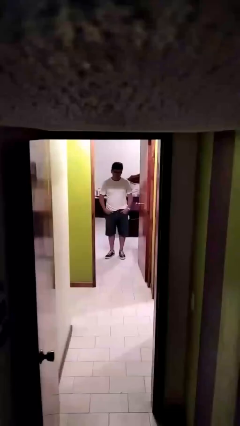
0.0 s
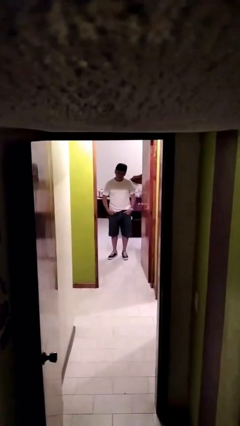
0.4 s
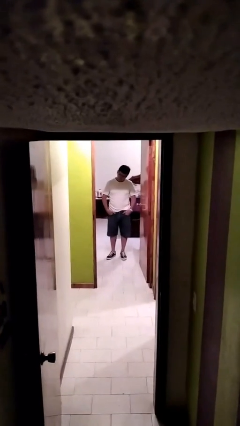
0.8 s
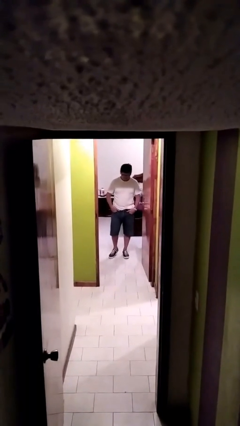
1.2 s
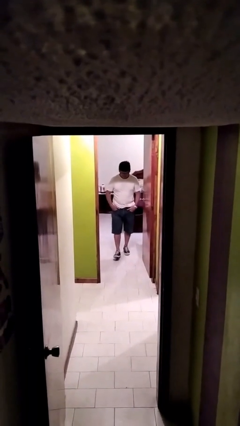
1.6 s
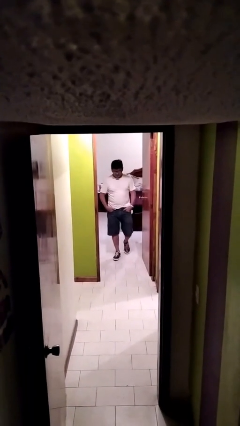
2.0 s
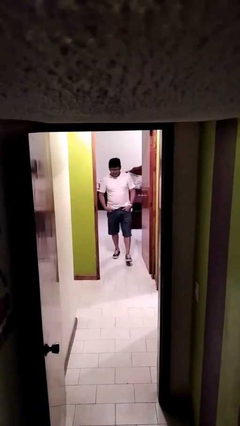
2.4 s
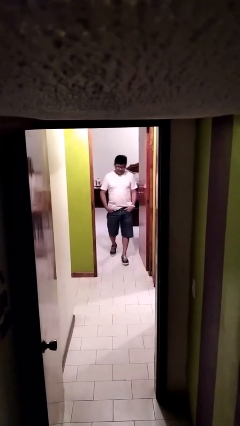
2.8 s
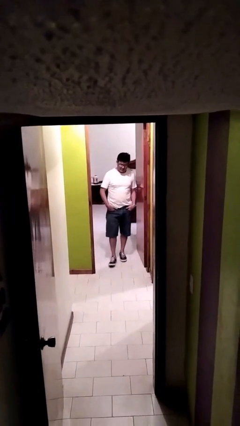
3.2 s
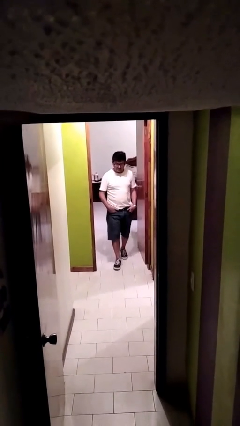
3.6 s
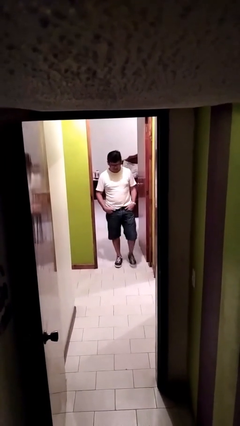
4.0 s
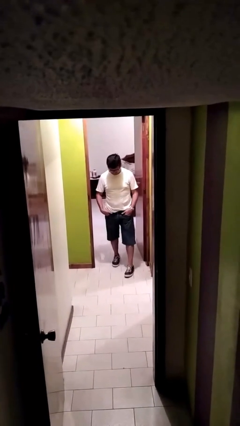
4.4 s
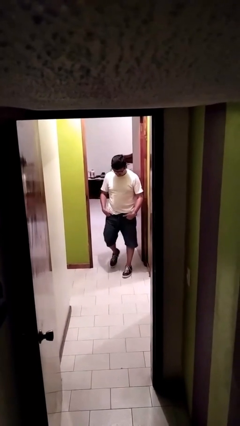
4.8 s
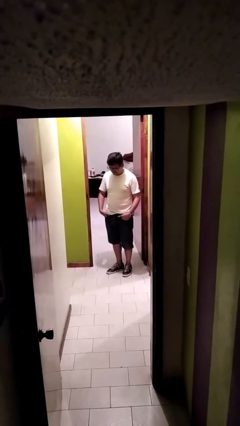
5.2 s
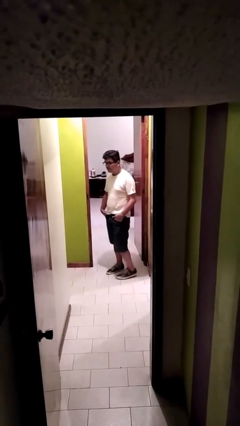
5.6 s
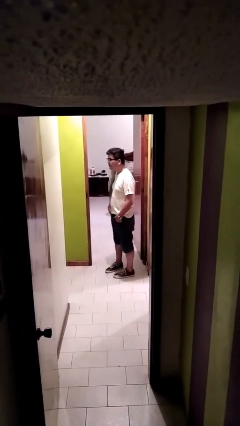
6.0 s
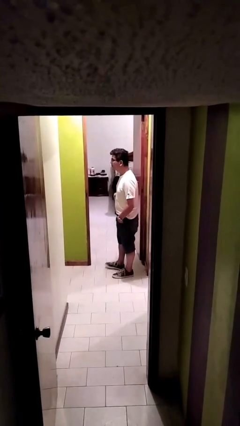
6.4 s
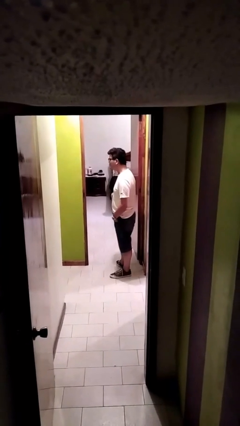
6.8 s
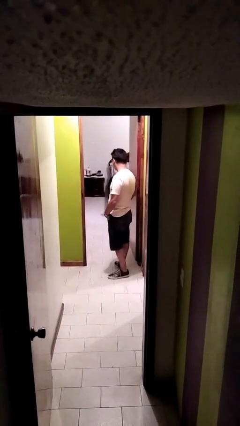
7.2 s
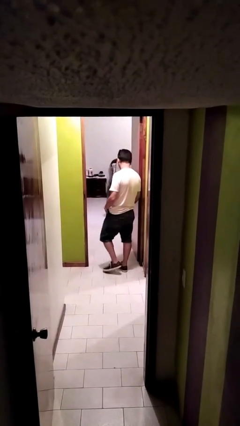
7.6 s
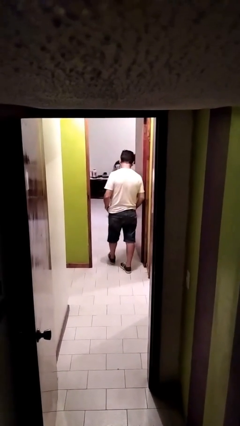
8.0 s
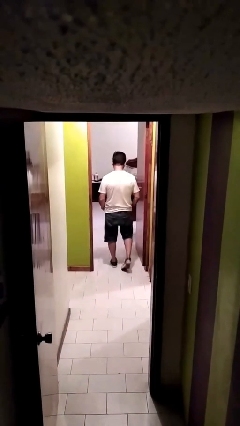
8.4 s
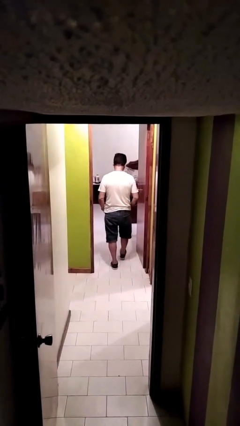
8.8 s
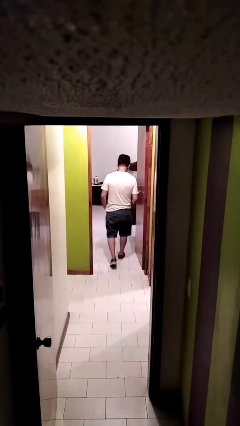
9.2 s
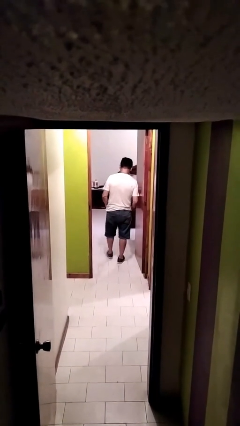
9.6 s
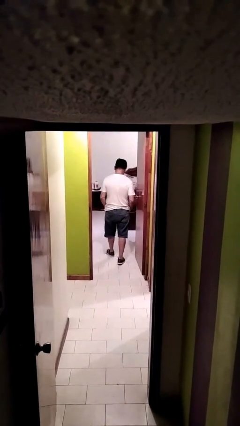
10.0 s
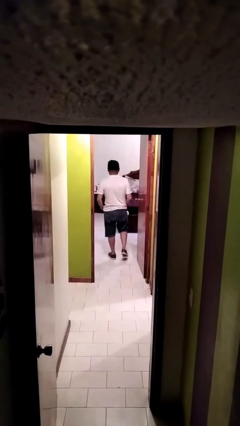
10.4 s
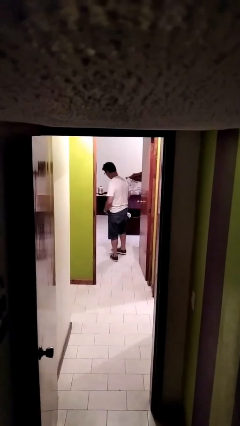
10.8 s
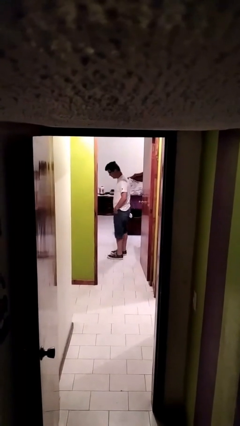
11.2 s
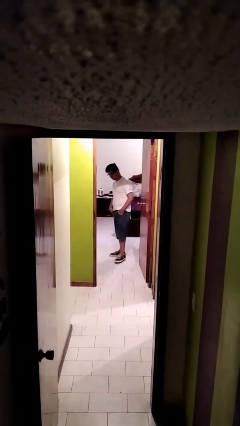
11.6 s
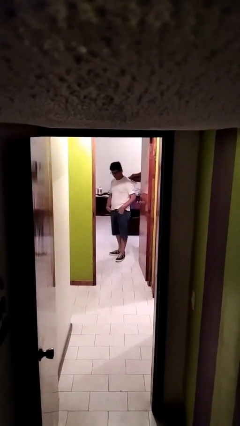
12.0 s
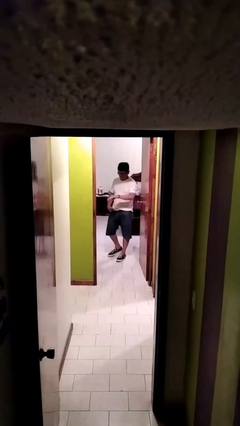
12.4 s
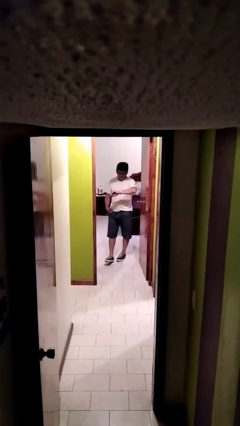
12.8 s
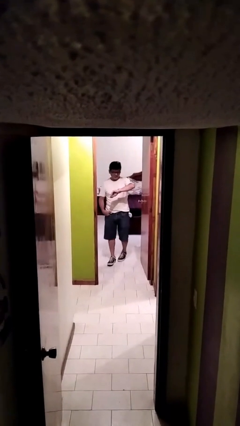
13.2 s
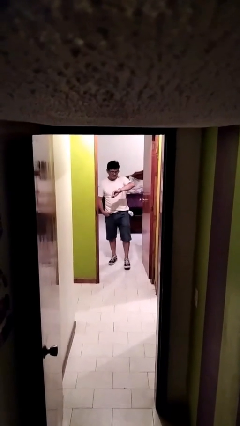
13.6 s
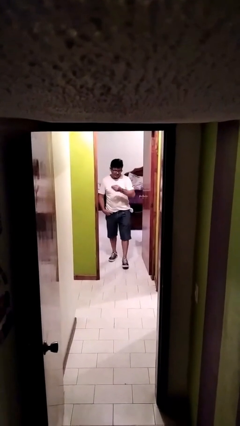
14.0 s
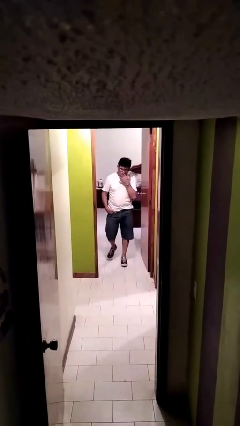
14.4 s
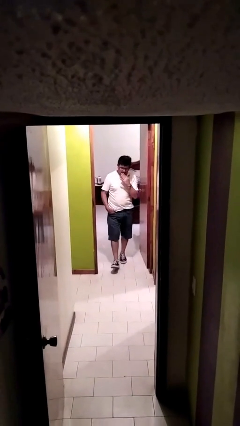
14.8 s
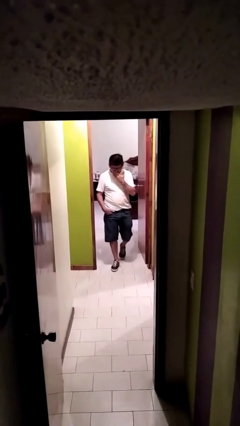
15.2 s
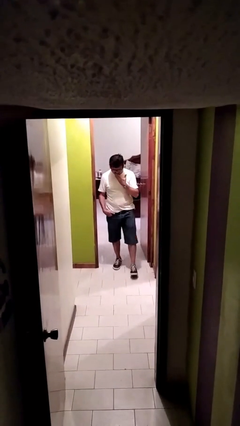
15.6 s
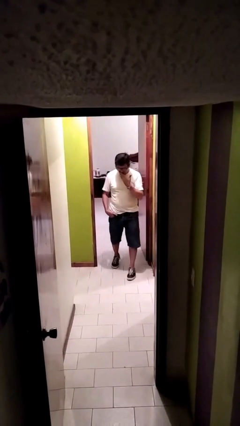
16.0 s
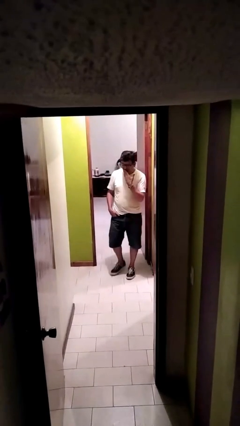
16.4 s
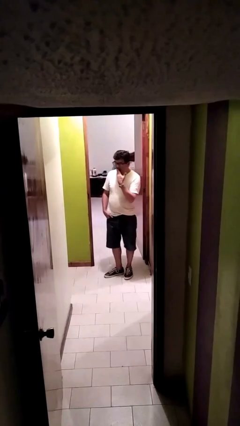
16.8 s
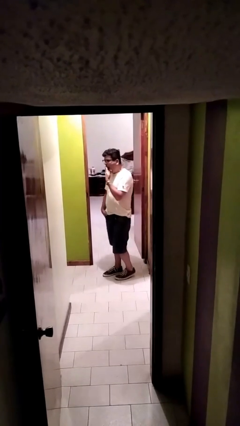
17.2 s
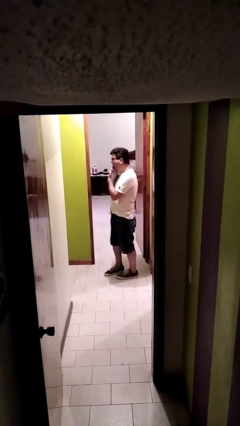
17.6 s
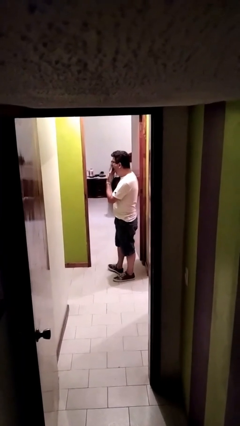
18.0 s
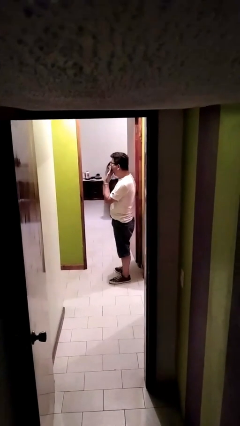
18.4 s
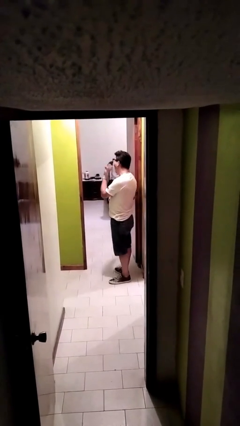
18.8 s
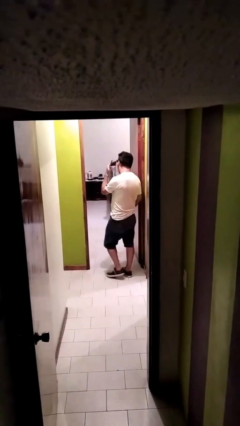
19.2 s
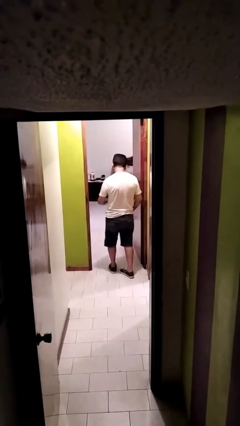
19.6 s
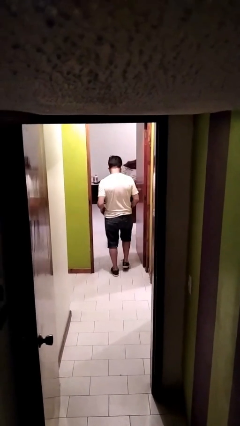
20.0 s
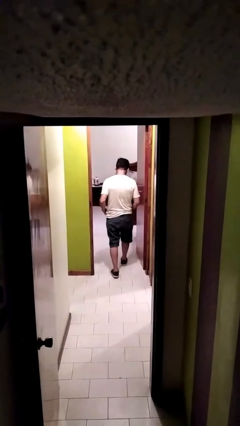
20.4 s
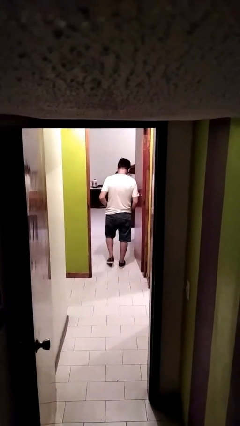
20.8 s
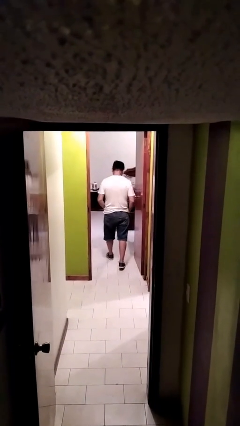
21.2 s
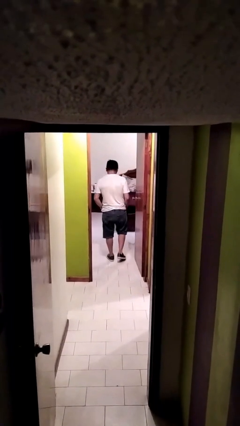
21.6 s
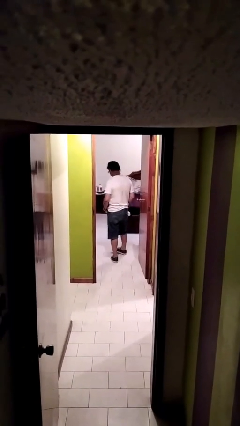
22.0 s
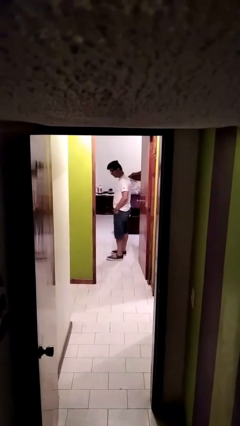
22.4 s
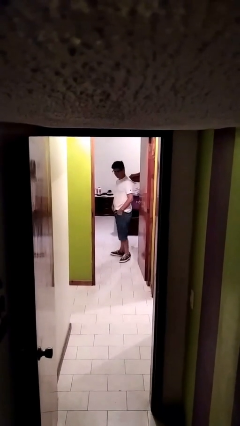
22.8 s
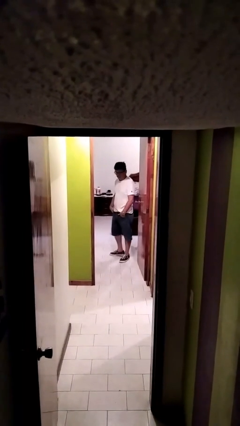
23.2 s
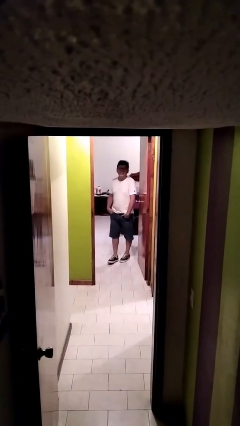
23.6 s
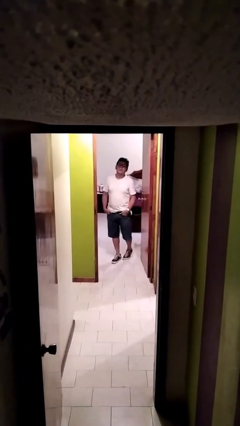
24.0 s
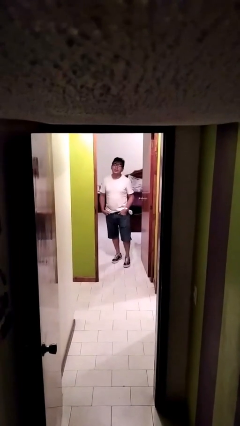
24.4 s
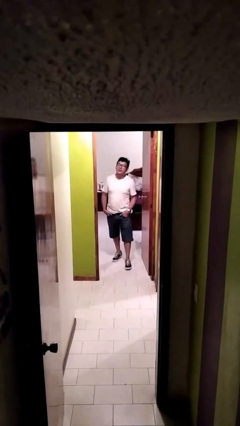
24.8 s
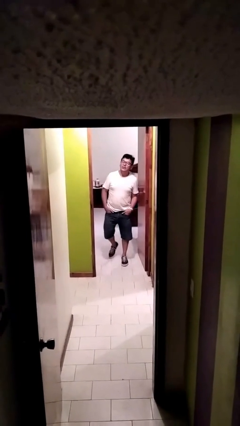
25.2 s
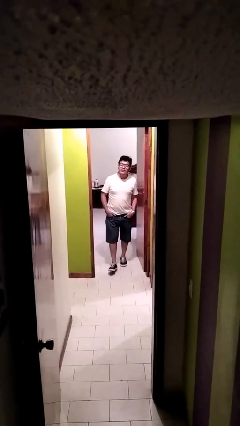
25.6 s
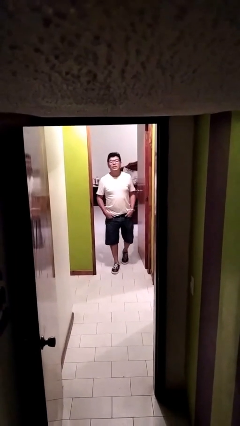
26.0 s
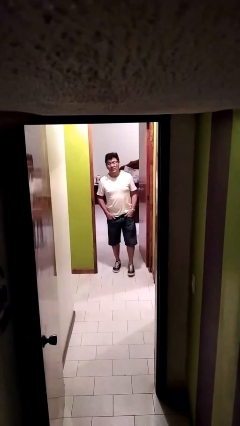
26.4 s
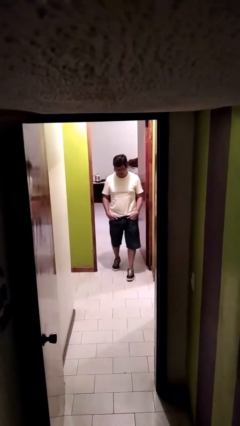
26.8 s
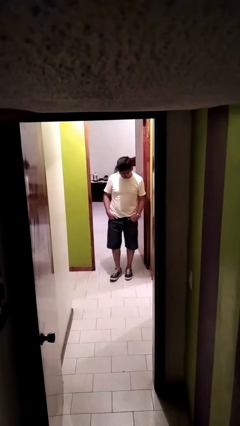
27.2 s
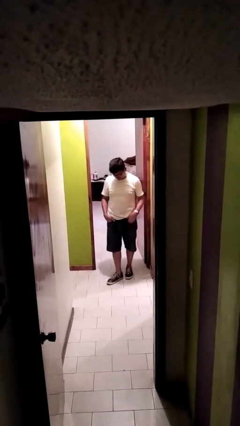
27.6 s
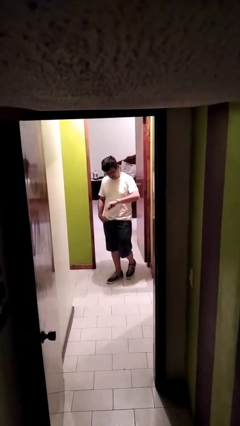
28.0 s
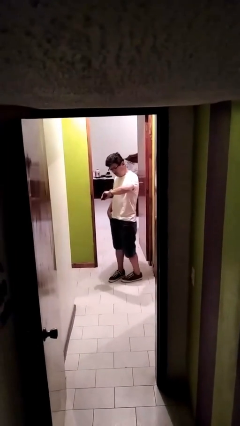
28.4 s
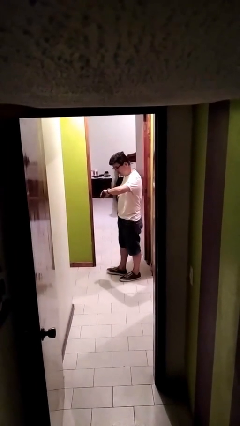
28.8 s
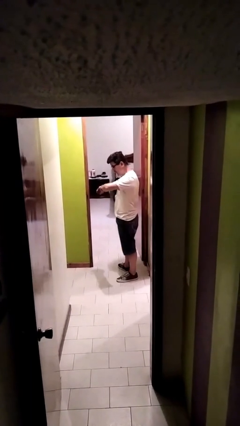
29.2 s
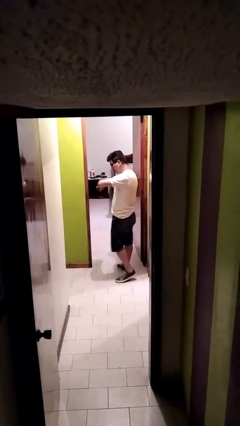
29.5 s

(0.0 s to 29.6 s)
person walks

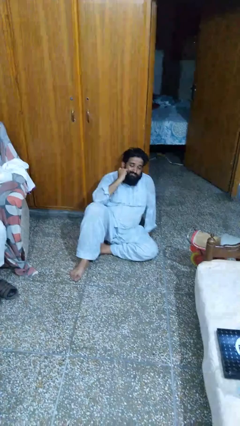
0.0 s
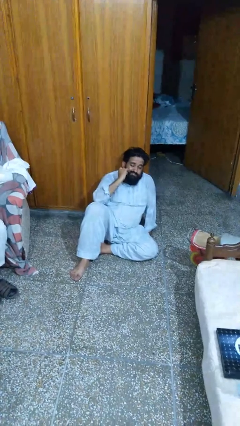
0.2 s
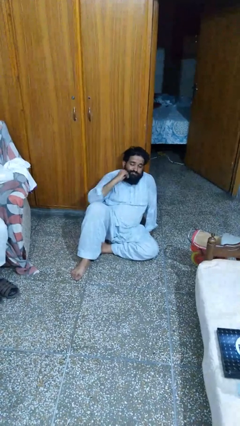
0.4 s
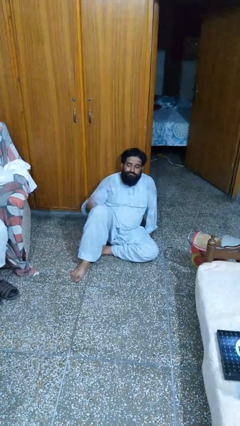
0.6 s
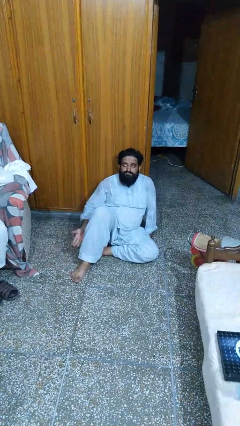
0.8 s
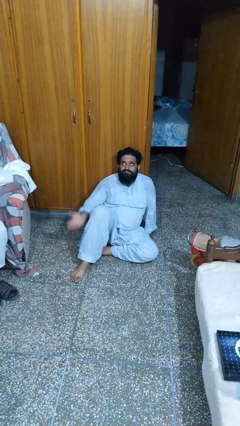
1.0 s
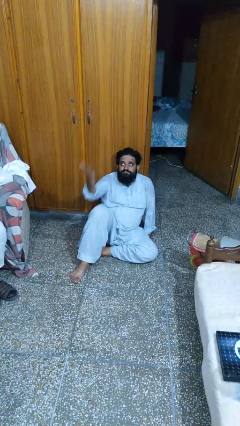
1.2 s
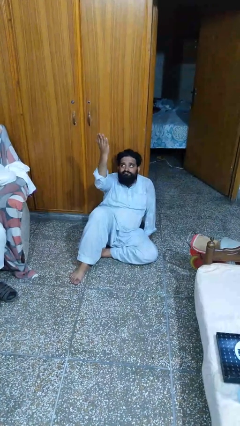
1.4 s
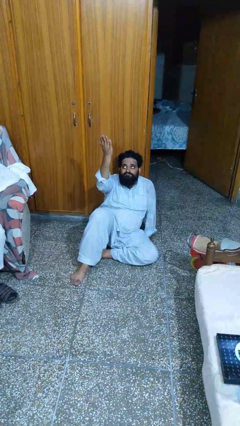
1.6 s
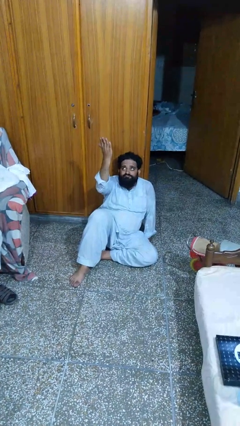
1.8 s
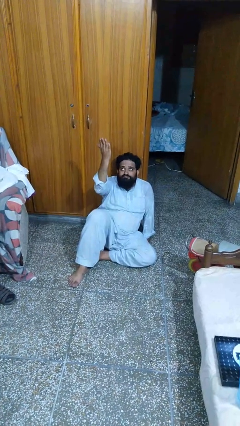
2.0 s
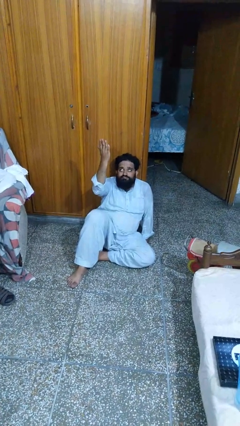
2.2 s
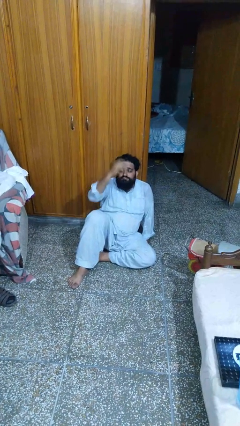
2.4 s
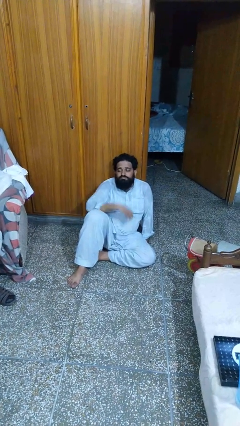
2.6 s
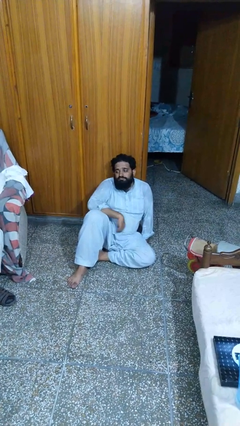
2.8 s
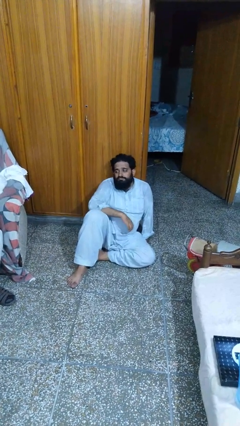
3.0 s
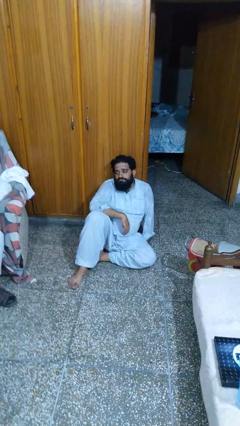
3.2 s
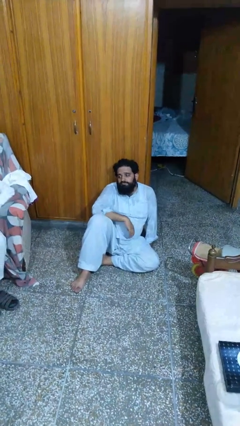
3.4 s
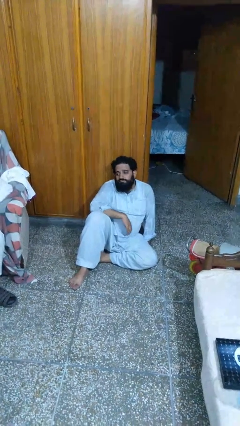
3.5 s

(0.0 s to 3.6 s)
person gestures swipe up
